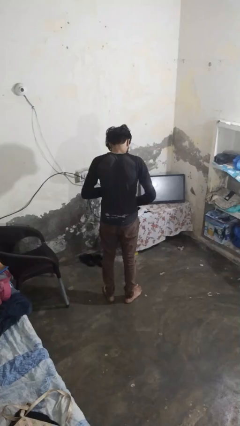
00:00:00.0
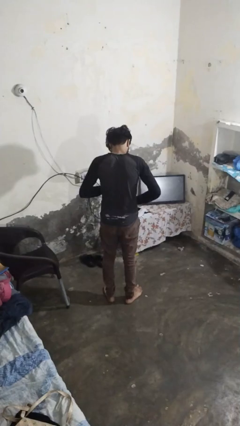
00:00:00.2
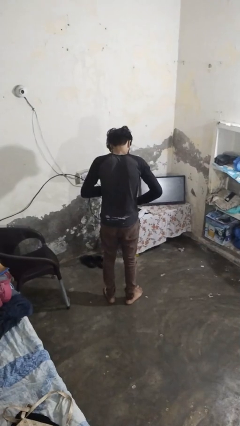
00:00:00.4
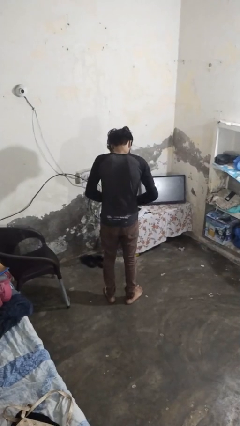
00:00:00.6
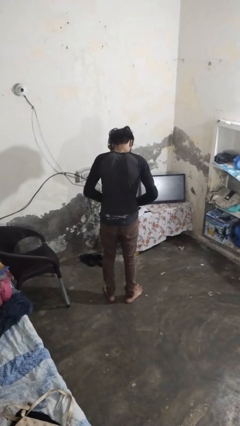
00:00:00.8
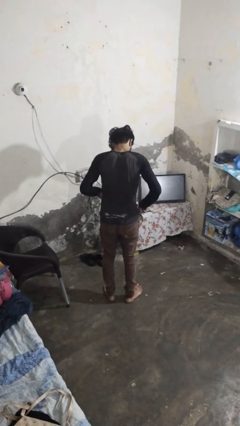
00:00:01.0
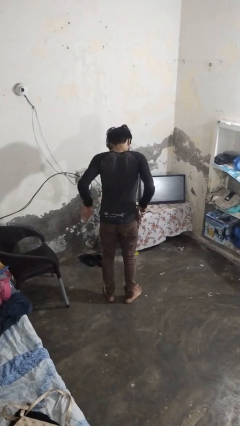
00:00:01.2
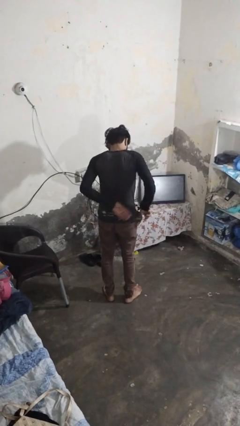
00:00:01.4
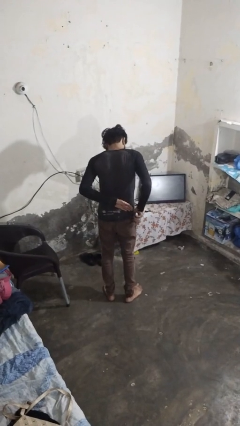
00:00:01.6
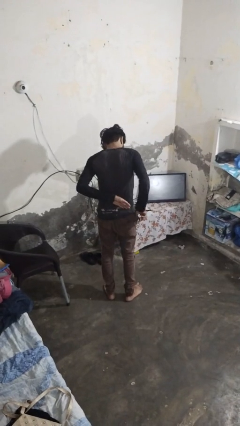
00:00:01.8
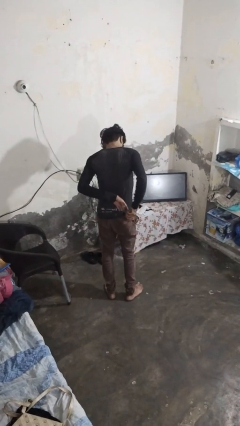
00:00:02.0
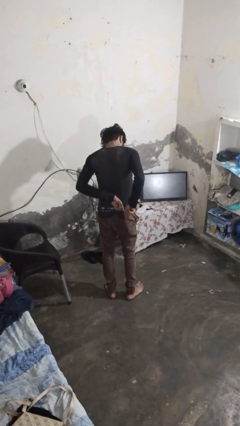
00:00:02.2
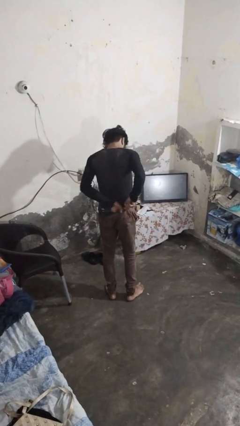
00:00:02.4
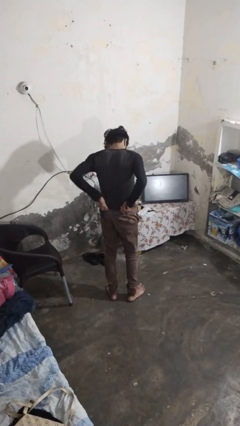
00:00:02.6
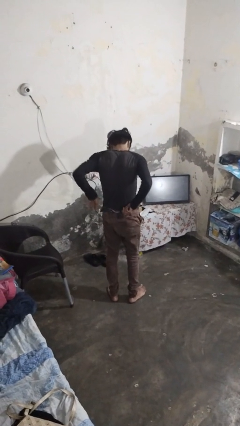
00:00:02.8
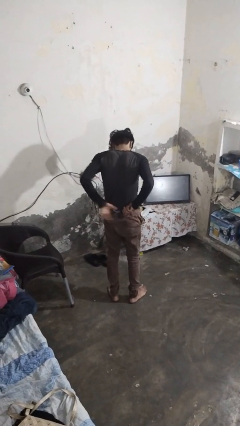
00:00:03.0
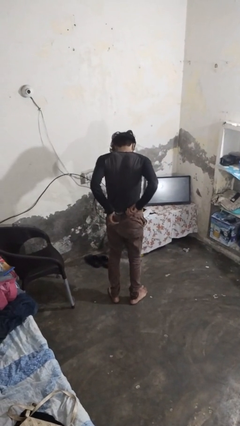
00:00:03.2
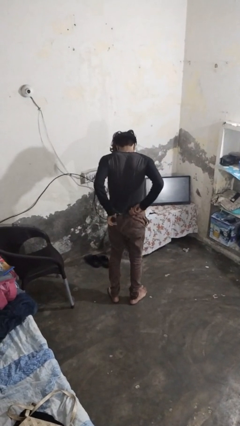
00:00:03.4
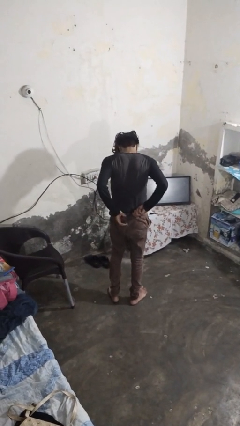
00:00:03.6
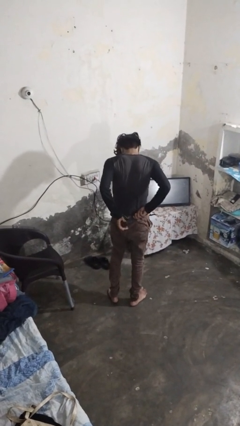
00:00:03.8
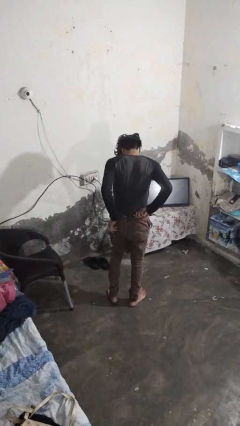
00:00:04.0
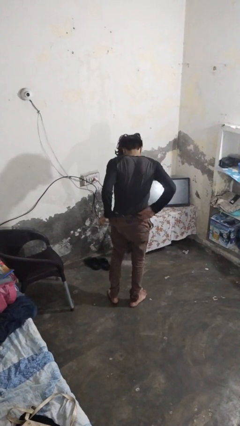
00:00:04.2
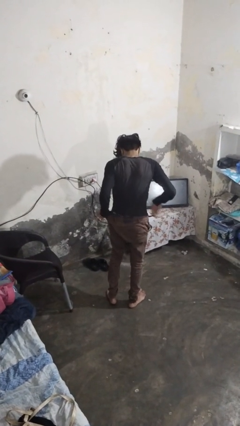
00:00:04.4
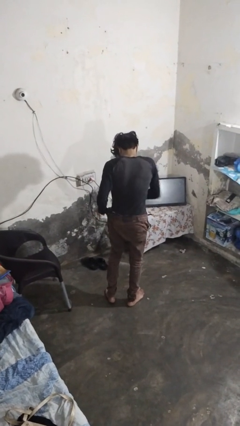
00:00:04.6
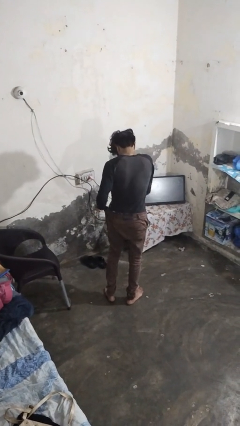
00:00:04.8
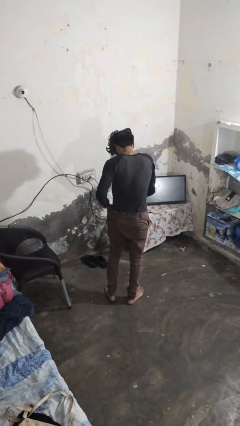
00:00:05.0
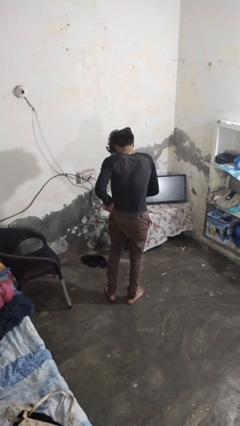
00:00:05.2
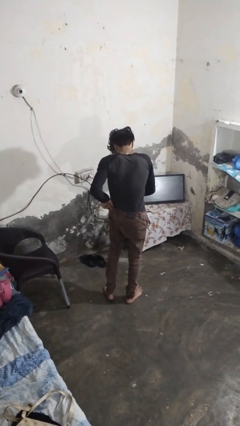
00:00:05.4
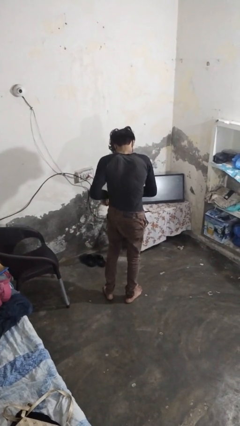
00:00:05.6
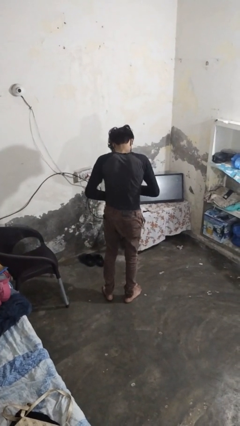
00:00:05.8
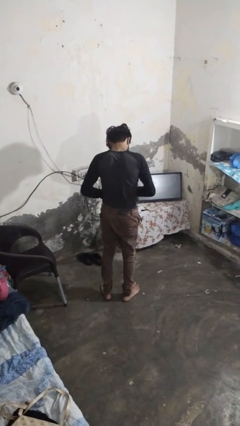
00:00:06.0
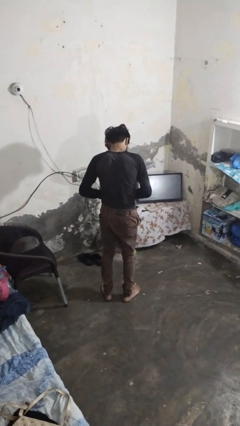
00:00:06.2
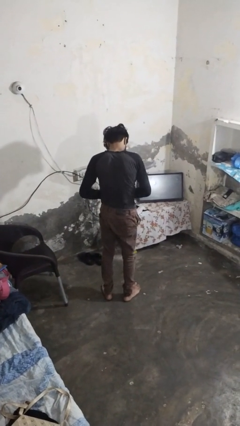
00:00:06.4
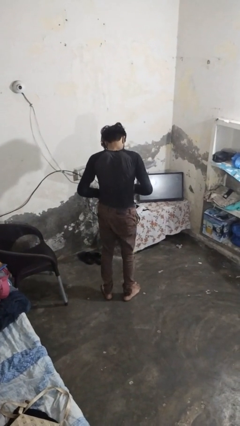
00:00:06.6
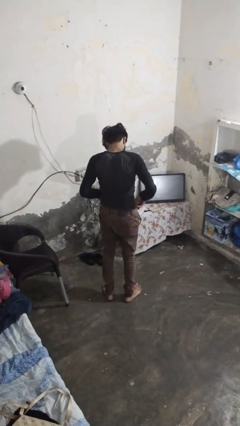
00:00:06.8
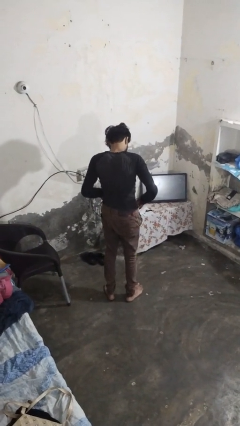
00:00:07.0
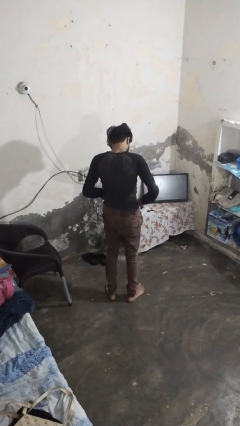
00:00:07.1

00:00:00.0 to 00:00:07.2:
person tucks in shirt

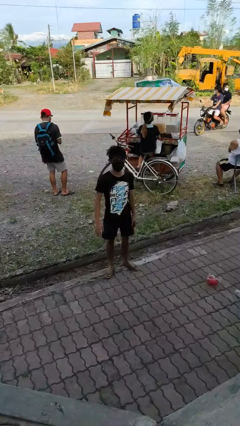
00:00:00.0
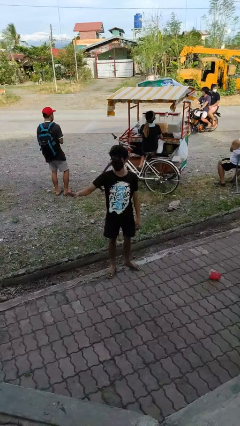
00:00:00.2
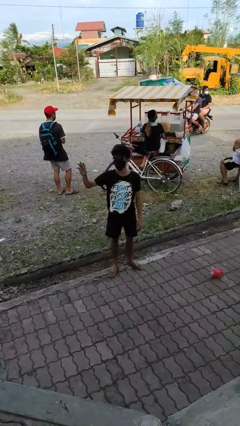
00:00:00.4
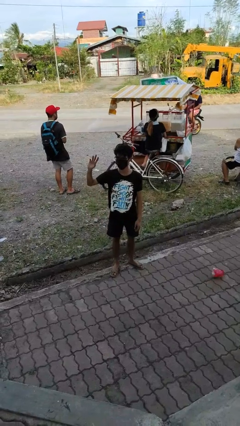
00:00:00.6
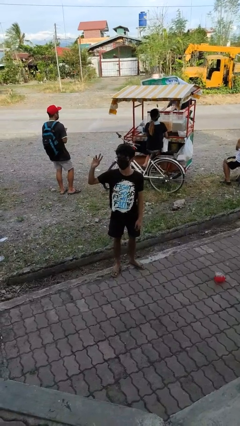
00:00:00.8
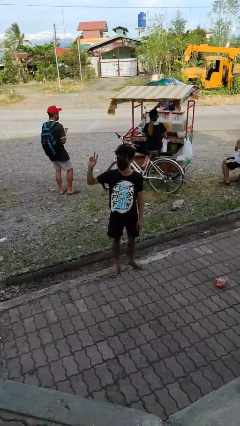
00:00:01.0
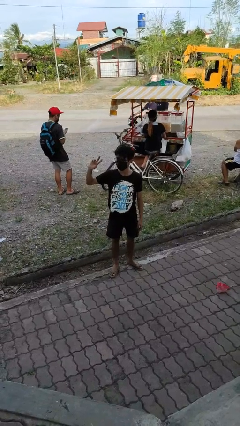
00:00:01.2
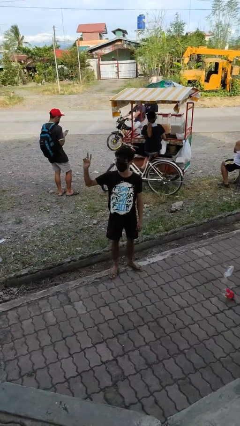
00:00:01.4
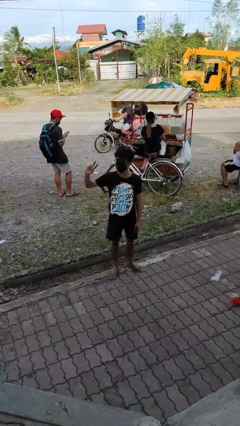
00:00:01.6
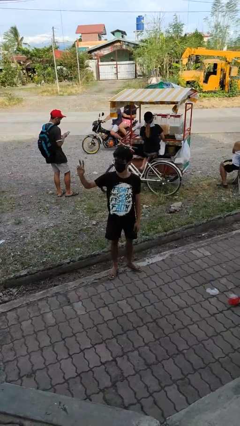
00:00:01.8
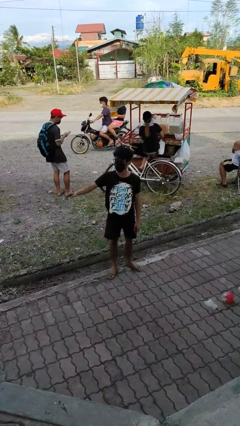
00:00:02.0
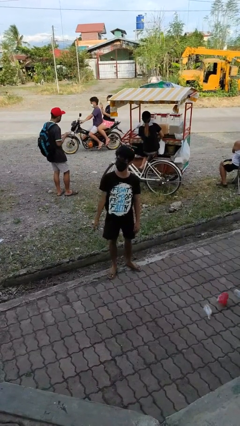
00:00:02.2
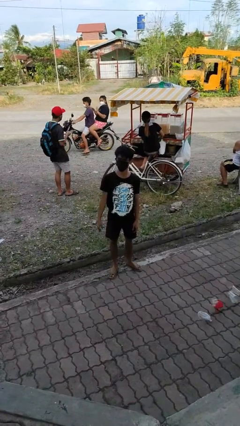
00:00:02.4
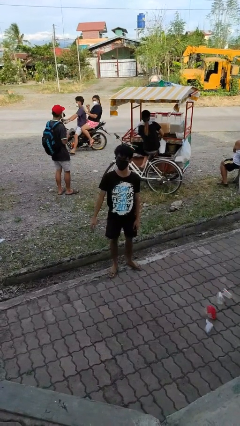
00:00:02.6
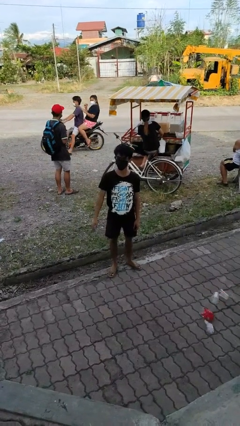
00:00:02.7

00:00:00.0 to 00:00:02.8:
person waves at person

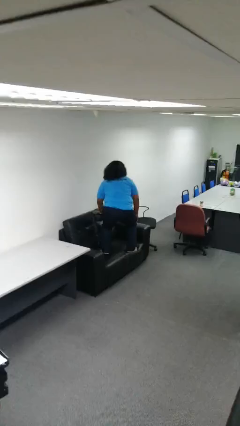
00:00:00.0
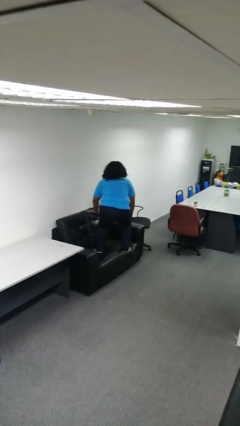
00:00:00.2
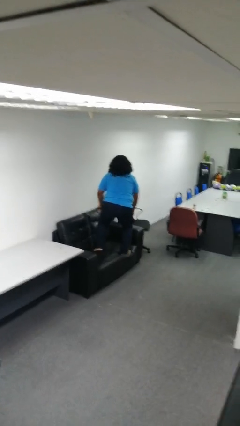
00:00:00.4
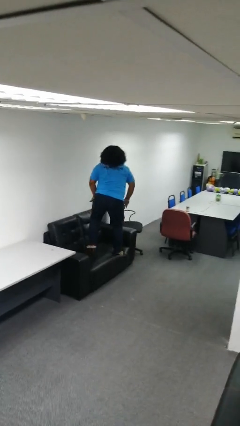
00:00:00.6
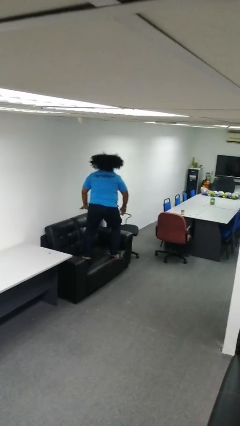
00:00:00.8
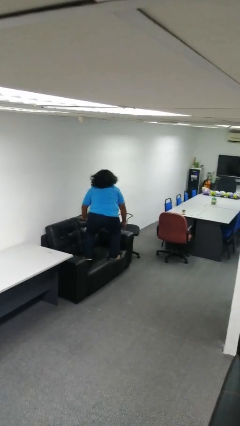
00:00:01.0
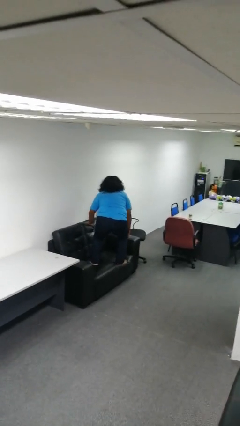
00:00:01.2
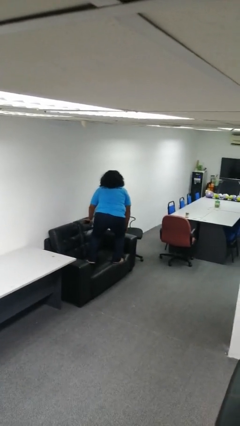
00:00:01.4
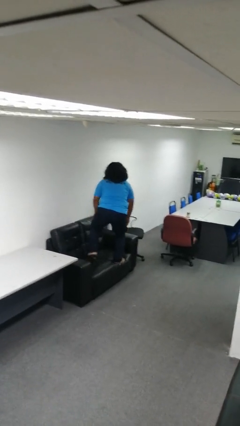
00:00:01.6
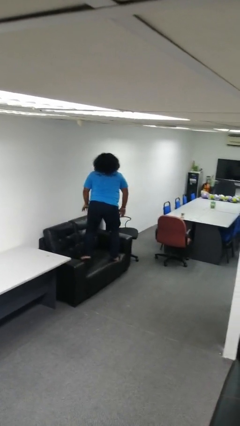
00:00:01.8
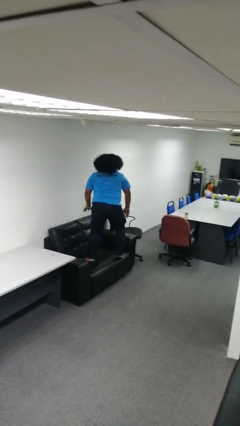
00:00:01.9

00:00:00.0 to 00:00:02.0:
person jumps on couch

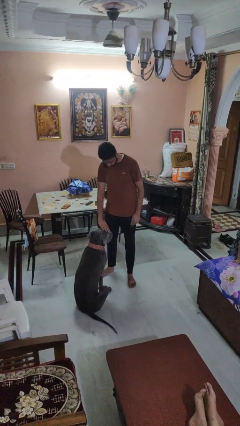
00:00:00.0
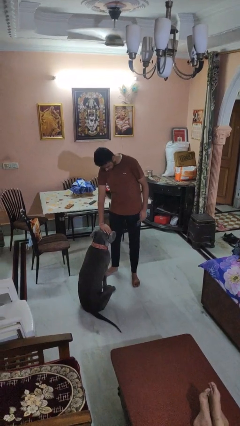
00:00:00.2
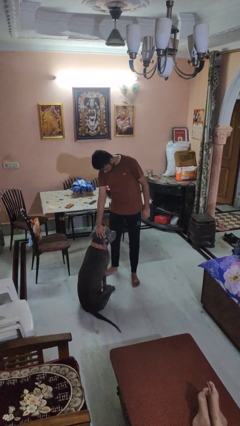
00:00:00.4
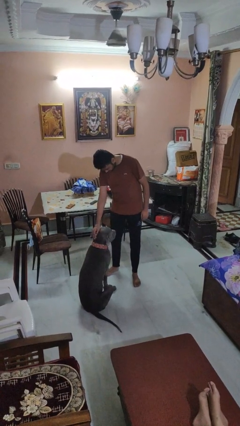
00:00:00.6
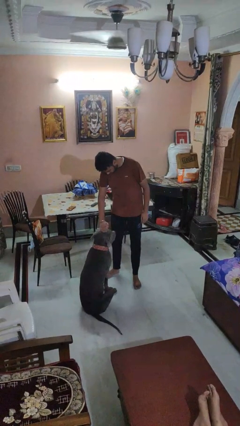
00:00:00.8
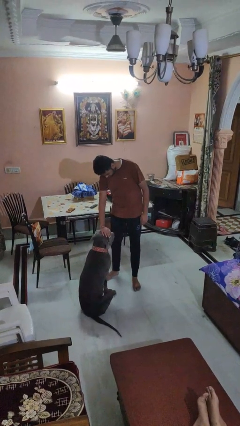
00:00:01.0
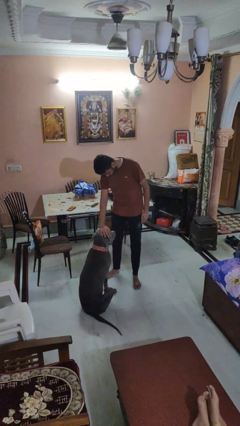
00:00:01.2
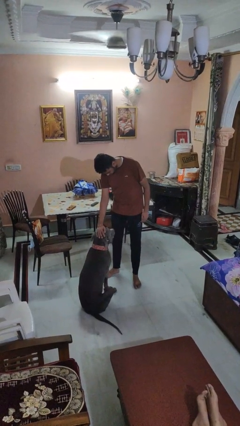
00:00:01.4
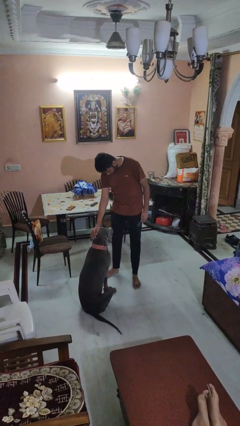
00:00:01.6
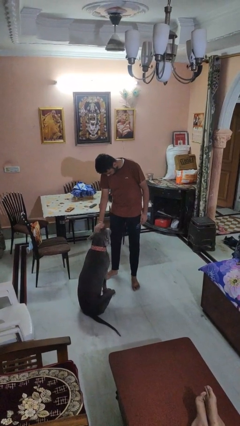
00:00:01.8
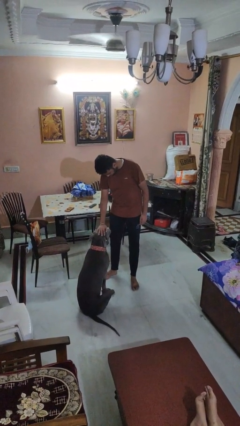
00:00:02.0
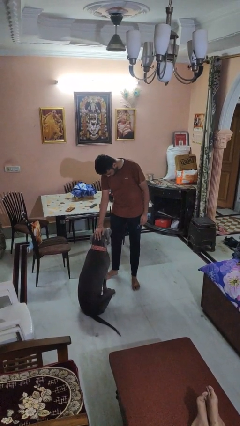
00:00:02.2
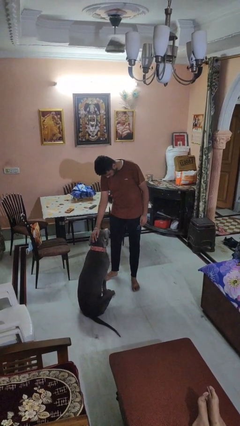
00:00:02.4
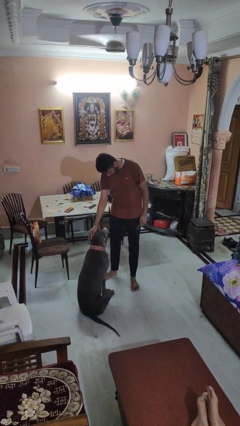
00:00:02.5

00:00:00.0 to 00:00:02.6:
person pets dog

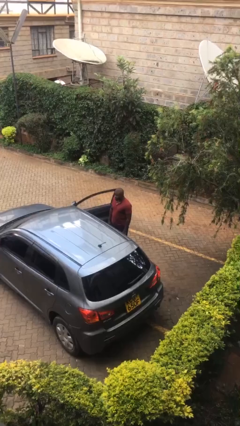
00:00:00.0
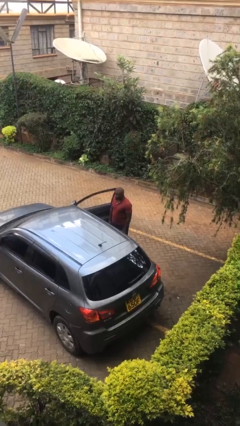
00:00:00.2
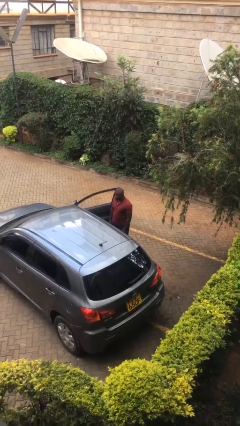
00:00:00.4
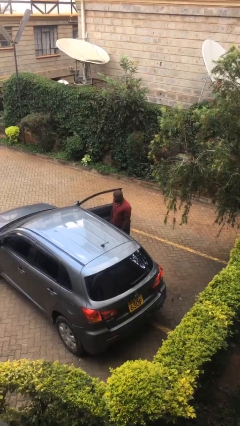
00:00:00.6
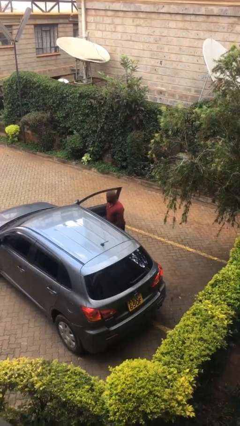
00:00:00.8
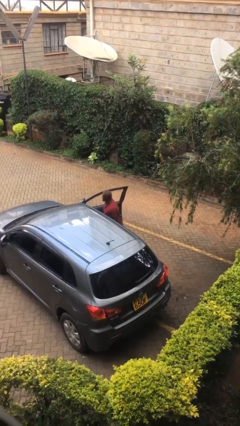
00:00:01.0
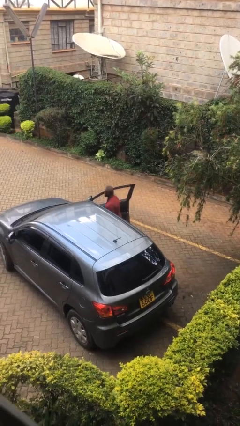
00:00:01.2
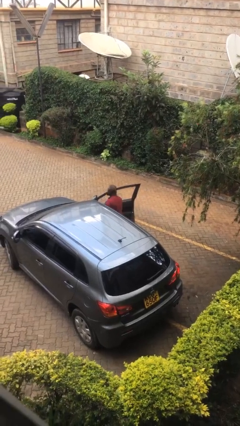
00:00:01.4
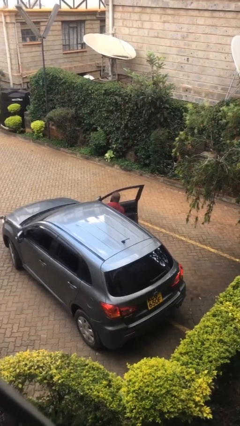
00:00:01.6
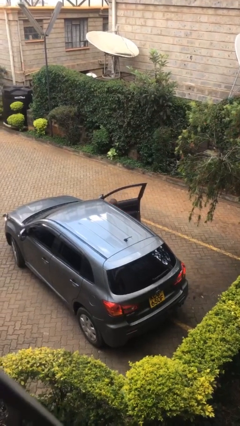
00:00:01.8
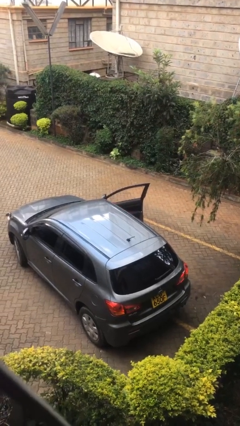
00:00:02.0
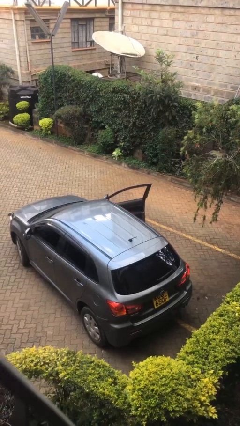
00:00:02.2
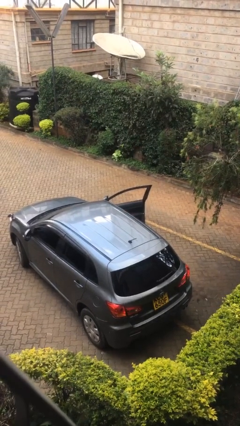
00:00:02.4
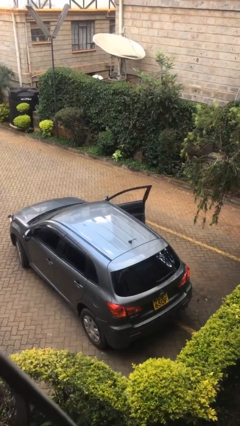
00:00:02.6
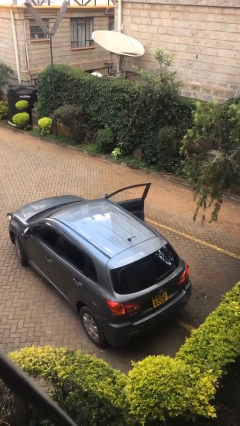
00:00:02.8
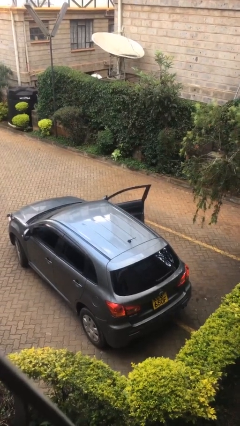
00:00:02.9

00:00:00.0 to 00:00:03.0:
person enters car
